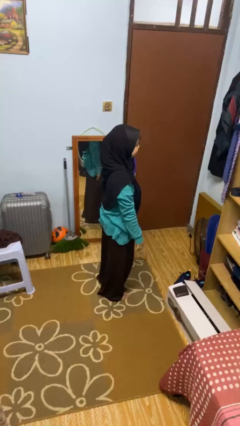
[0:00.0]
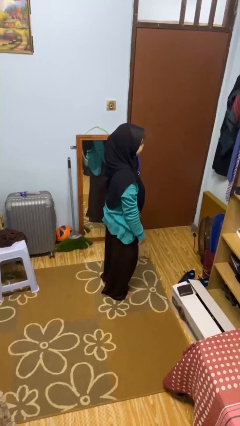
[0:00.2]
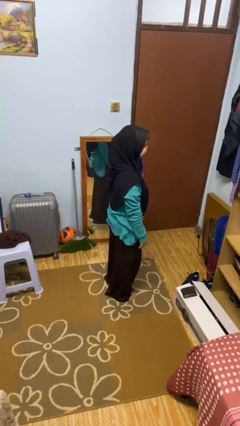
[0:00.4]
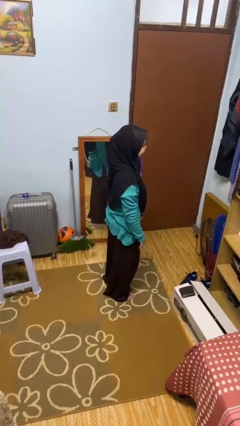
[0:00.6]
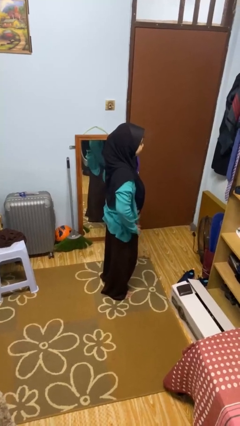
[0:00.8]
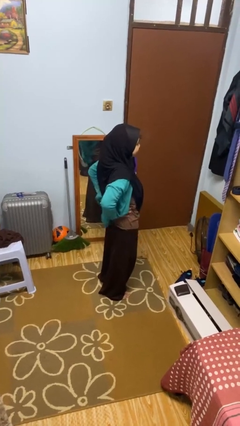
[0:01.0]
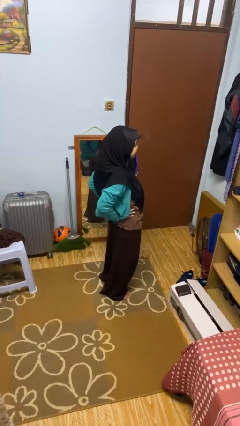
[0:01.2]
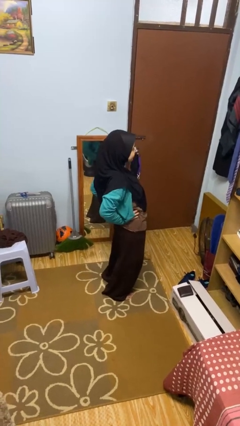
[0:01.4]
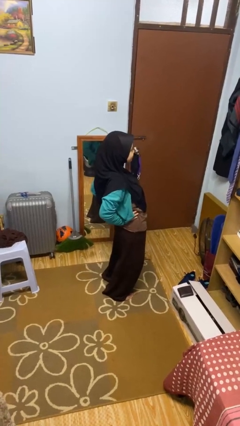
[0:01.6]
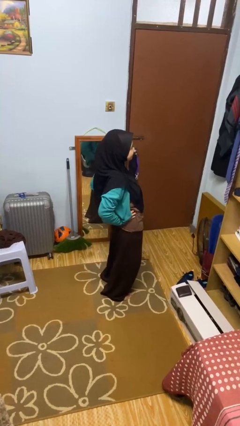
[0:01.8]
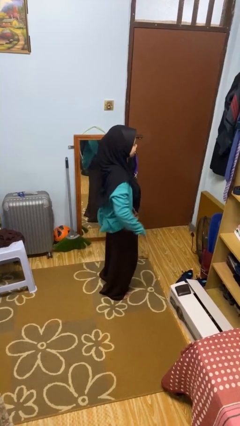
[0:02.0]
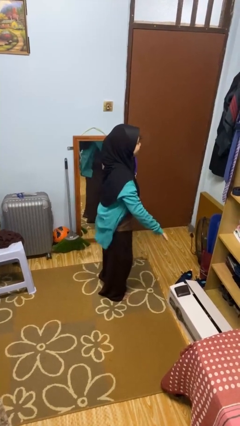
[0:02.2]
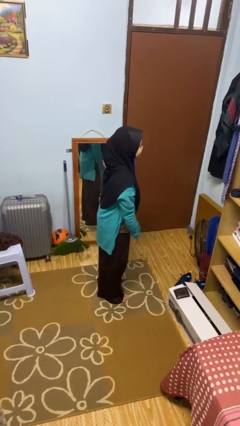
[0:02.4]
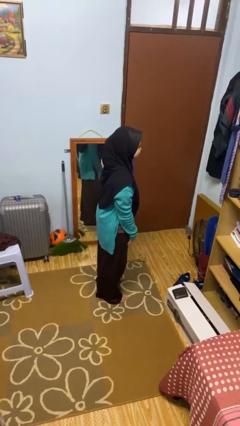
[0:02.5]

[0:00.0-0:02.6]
person stretches back

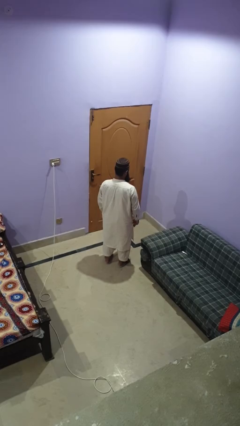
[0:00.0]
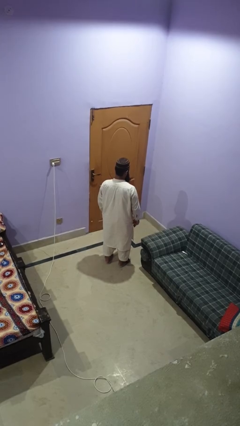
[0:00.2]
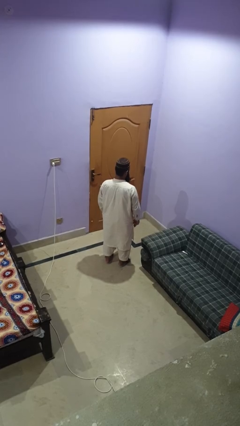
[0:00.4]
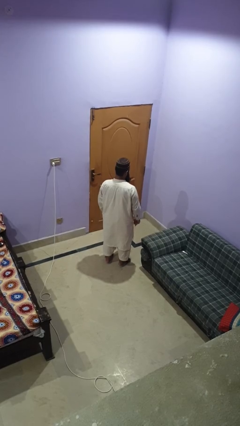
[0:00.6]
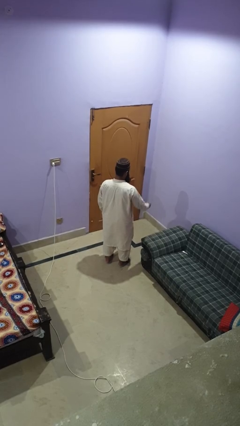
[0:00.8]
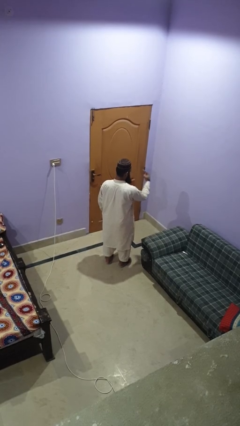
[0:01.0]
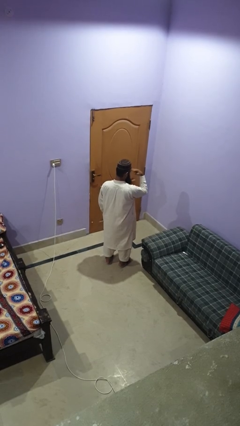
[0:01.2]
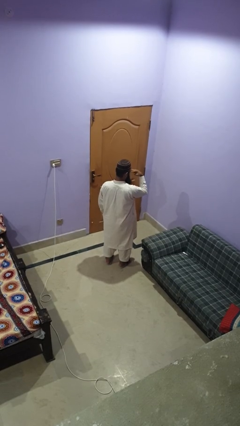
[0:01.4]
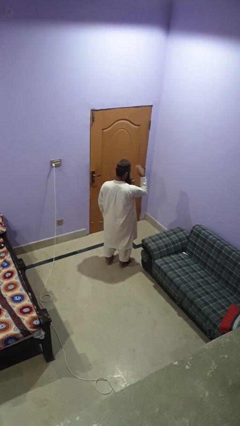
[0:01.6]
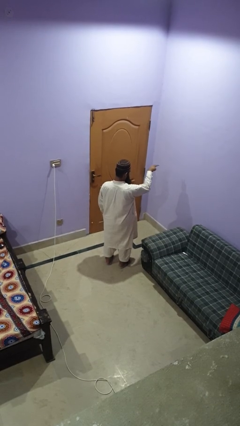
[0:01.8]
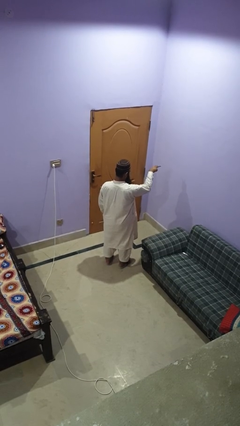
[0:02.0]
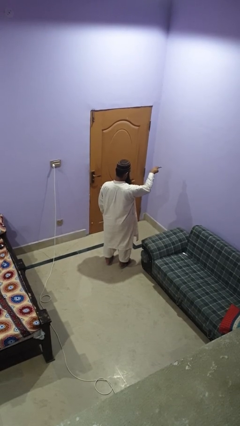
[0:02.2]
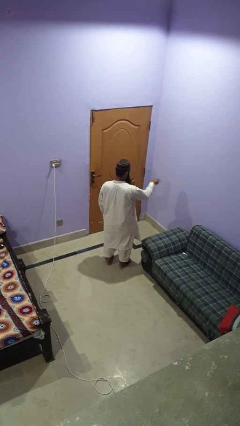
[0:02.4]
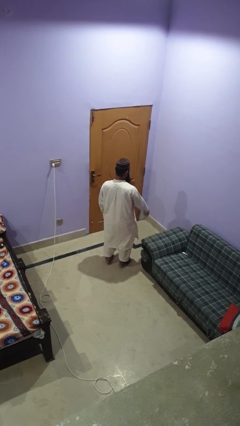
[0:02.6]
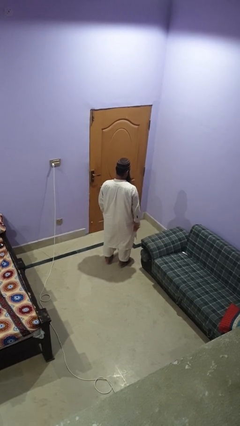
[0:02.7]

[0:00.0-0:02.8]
person gestures watch closely

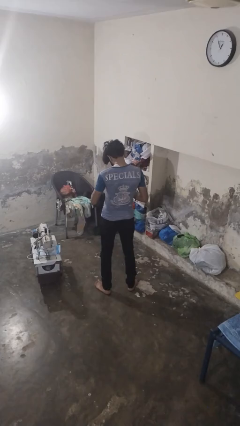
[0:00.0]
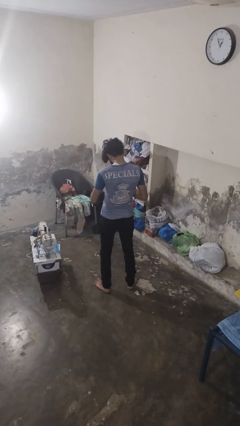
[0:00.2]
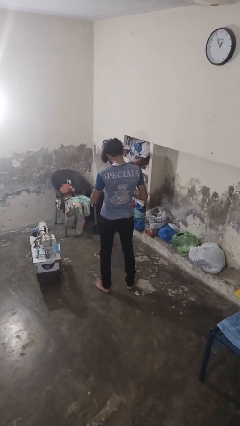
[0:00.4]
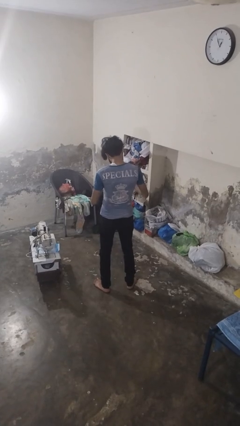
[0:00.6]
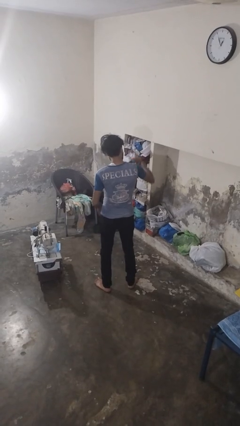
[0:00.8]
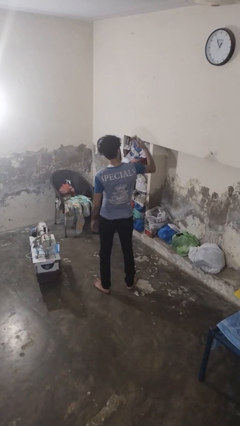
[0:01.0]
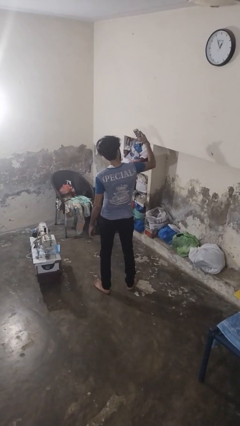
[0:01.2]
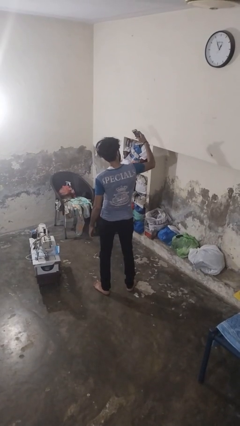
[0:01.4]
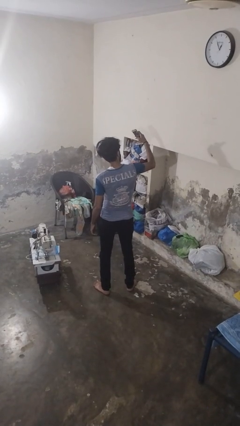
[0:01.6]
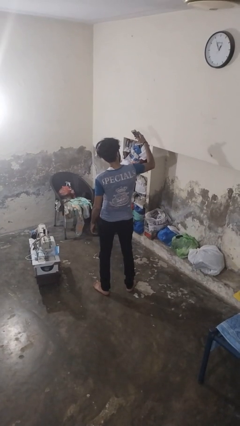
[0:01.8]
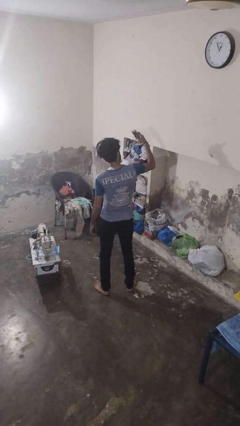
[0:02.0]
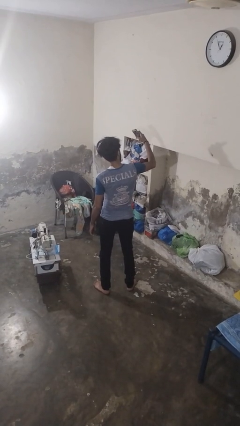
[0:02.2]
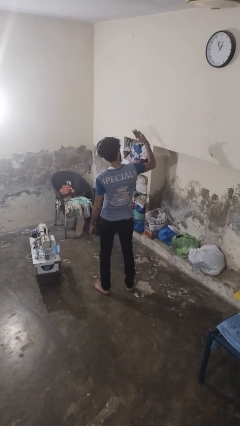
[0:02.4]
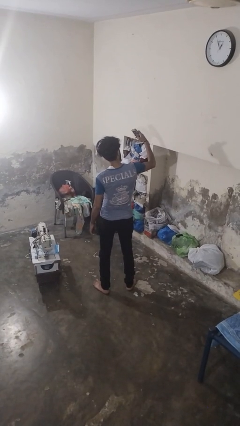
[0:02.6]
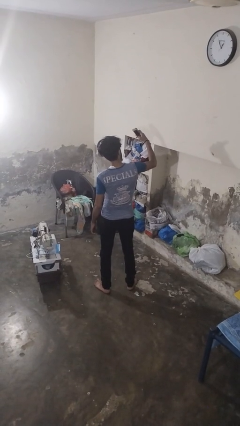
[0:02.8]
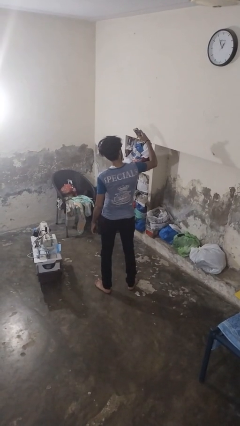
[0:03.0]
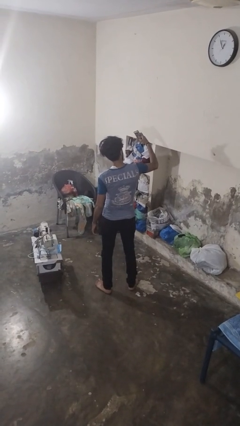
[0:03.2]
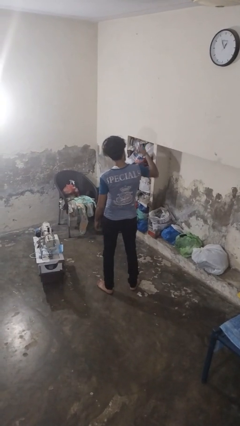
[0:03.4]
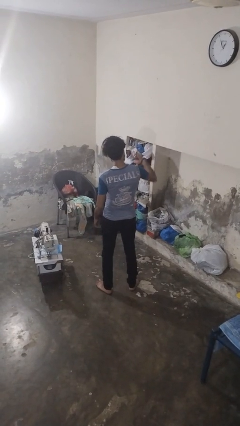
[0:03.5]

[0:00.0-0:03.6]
person takes selfie

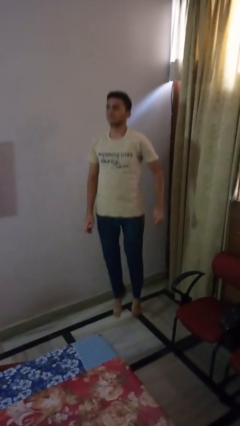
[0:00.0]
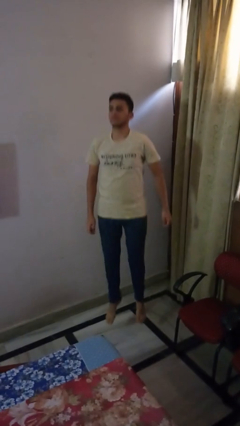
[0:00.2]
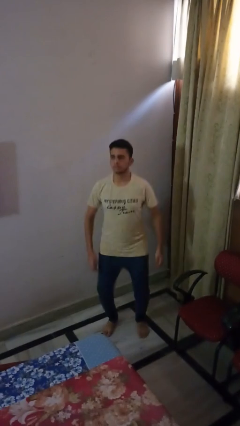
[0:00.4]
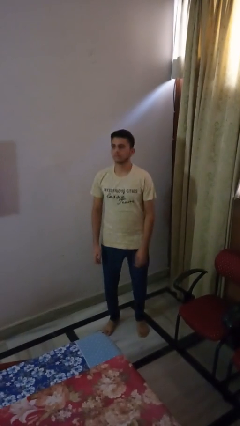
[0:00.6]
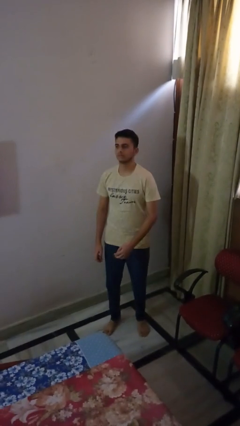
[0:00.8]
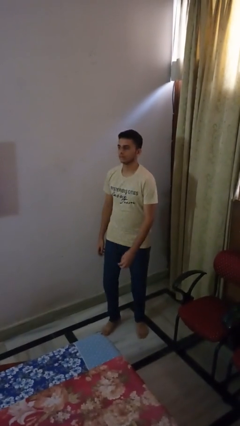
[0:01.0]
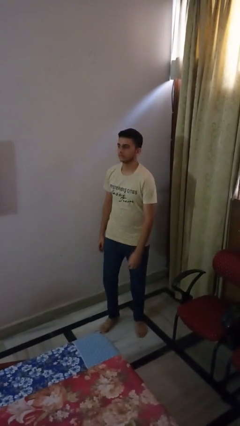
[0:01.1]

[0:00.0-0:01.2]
person jumps

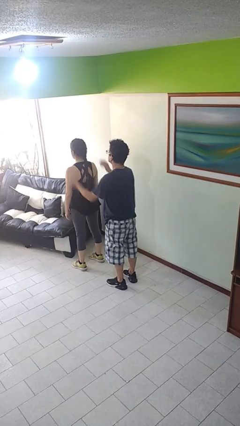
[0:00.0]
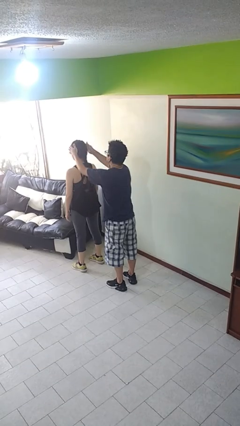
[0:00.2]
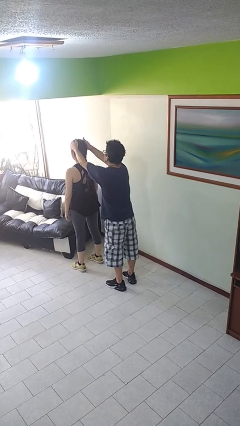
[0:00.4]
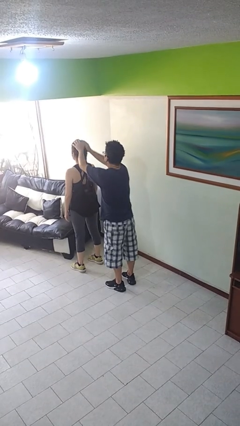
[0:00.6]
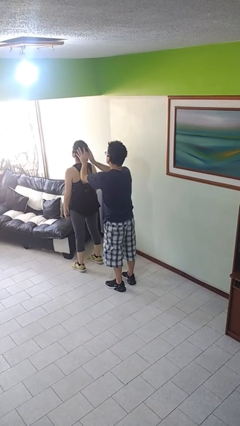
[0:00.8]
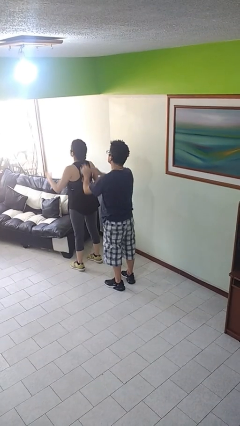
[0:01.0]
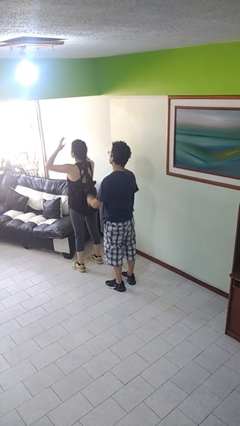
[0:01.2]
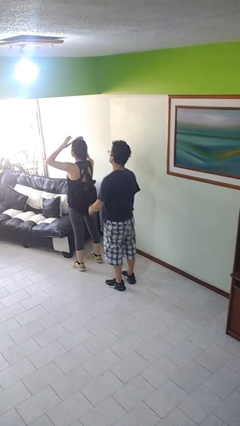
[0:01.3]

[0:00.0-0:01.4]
person grabs person by hair

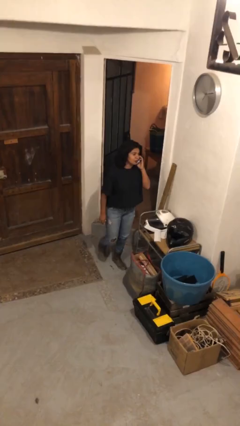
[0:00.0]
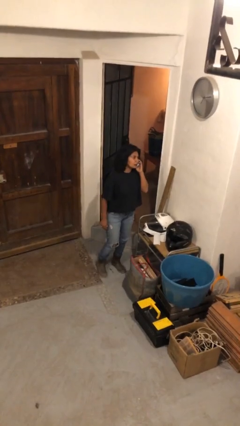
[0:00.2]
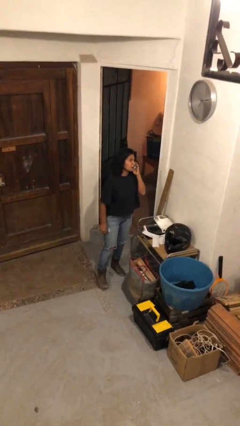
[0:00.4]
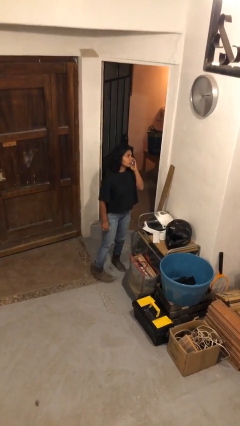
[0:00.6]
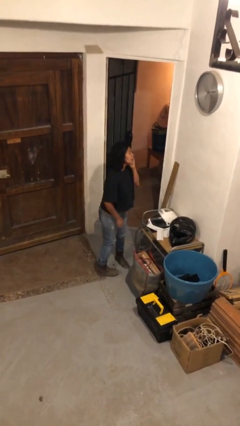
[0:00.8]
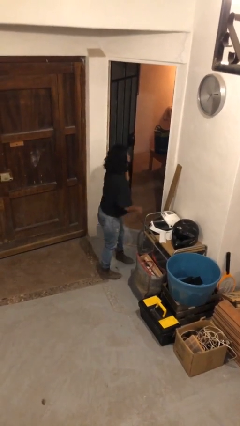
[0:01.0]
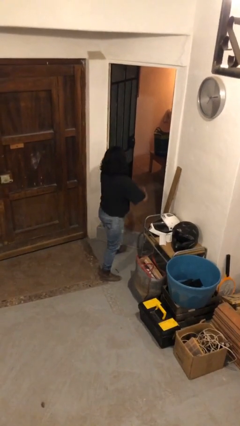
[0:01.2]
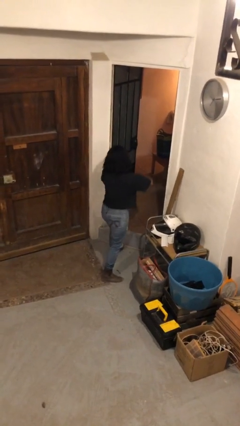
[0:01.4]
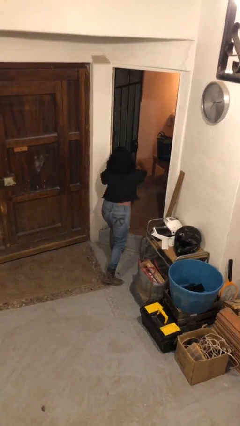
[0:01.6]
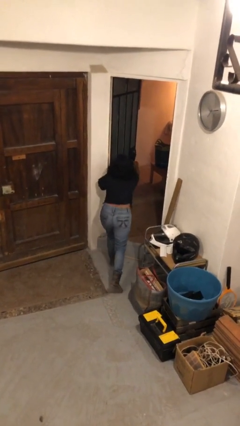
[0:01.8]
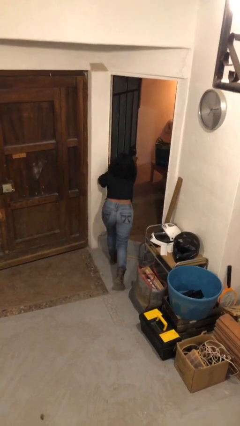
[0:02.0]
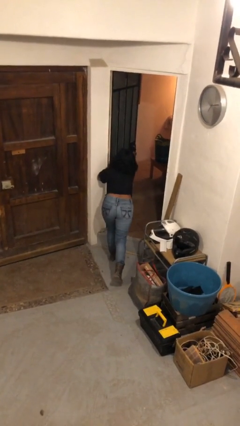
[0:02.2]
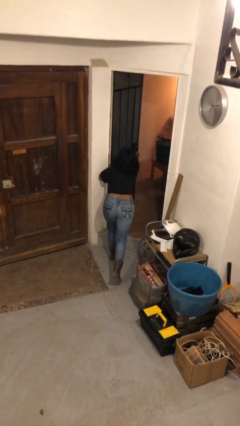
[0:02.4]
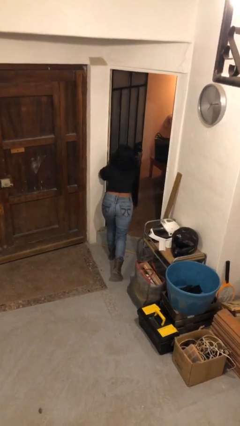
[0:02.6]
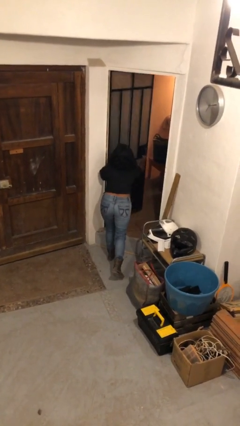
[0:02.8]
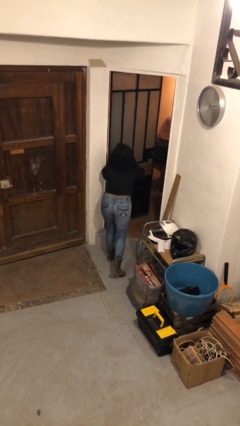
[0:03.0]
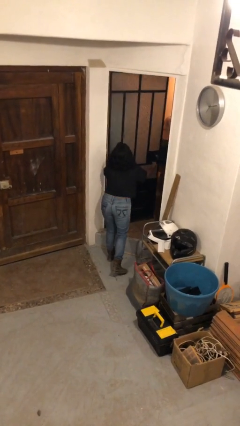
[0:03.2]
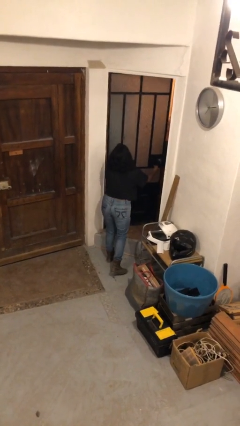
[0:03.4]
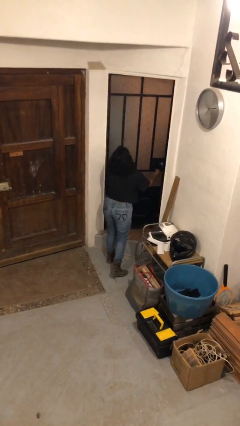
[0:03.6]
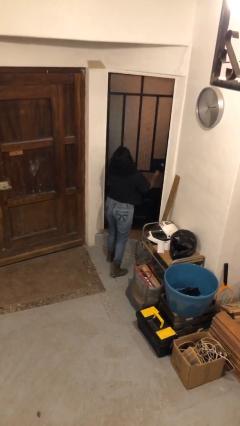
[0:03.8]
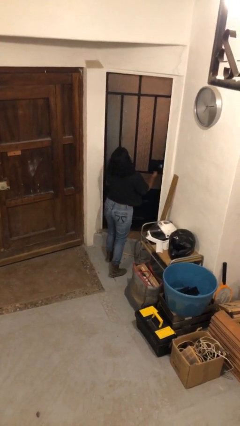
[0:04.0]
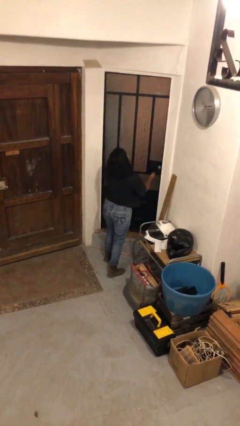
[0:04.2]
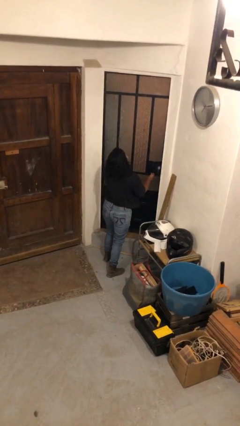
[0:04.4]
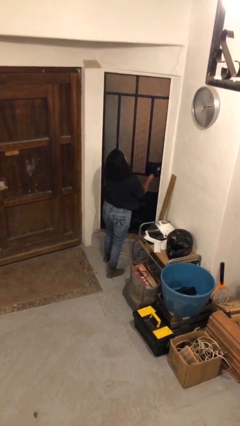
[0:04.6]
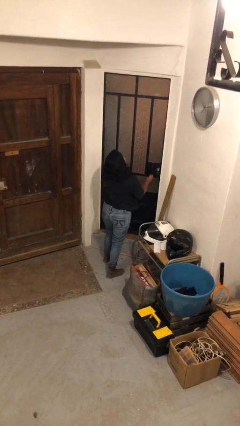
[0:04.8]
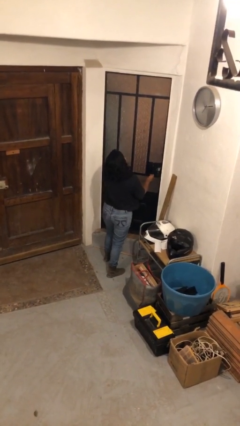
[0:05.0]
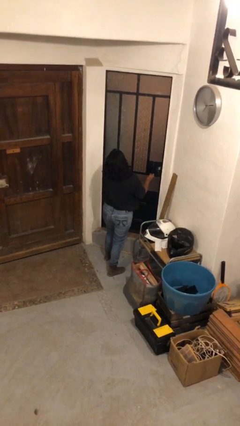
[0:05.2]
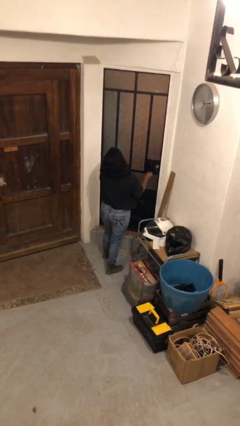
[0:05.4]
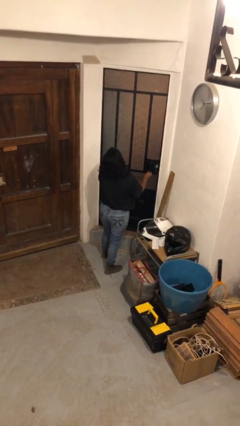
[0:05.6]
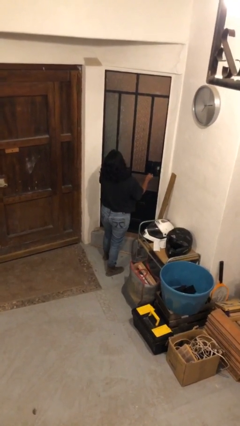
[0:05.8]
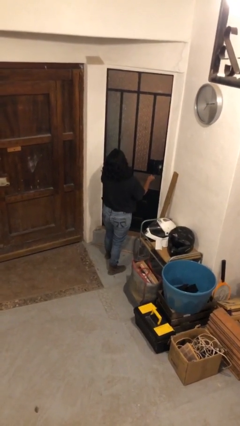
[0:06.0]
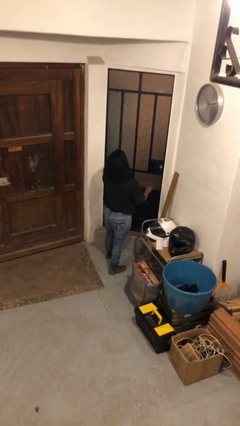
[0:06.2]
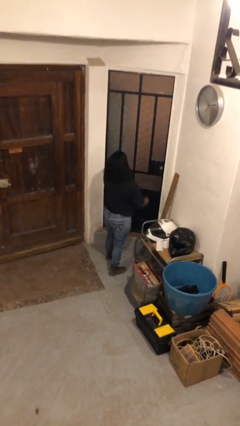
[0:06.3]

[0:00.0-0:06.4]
person closes facility door
